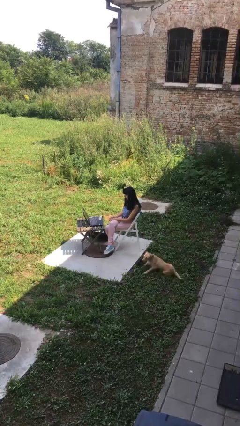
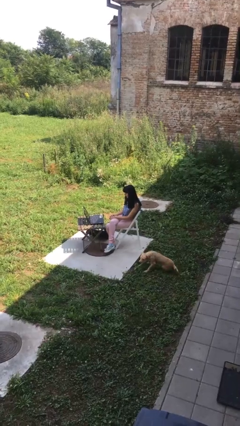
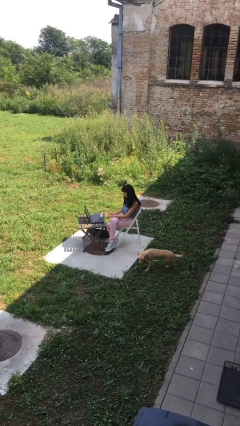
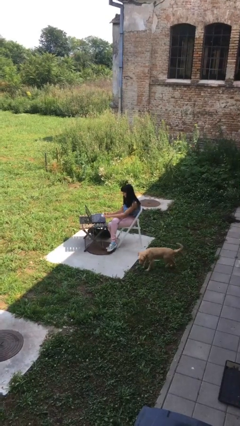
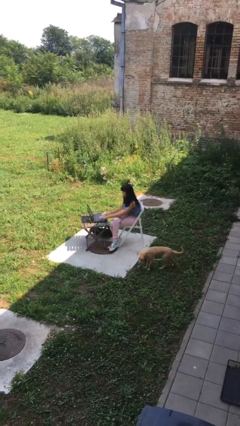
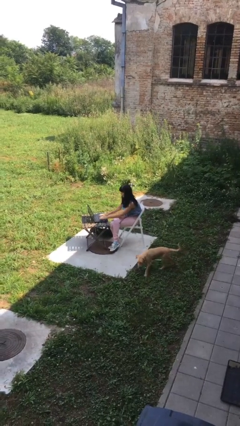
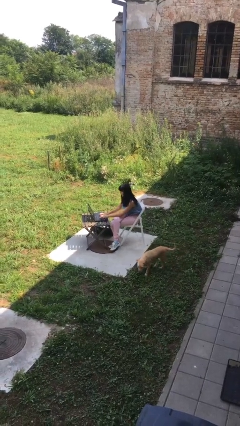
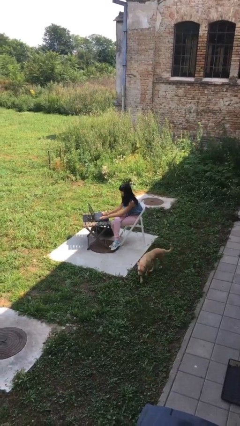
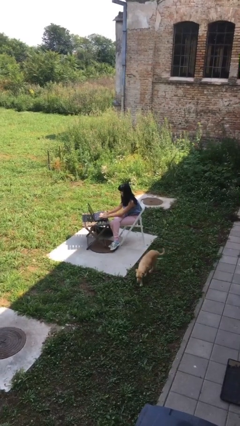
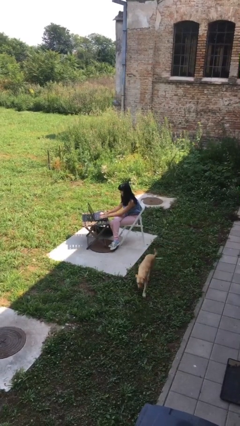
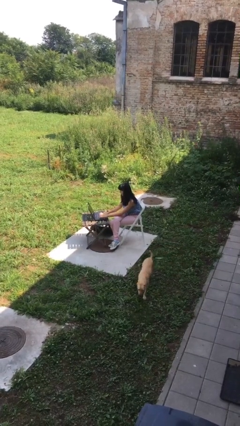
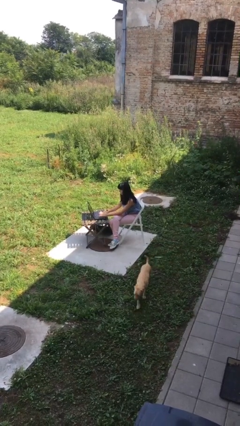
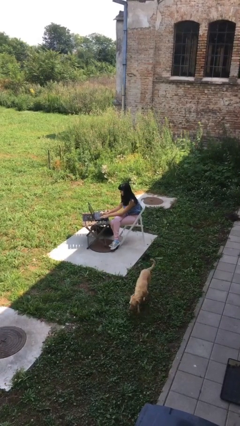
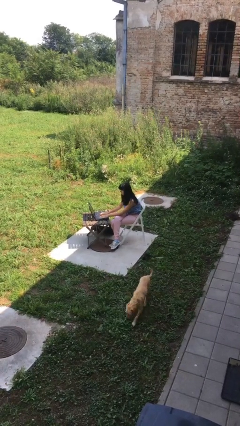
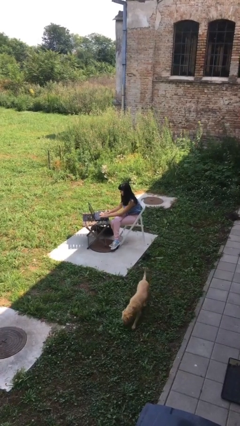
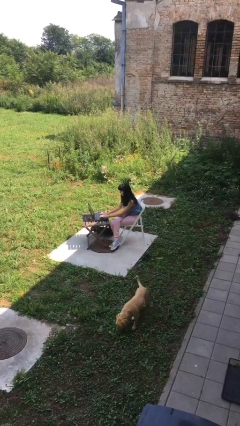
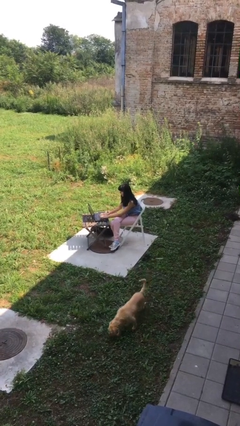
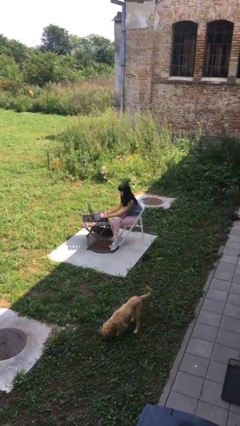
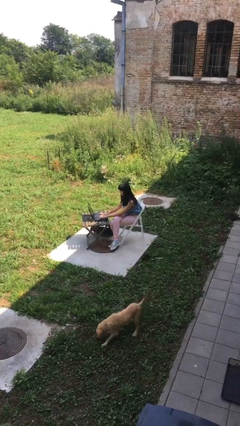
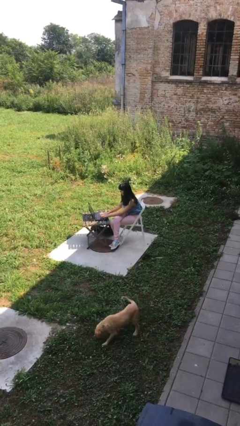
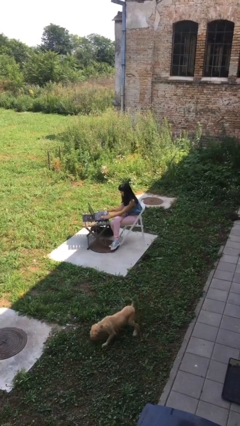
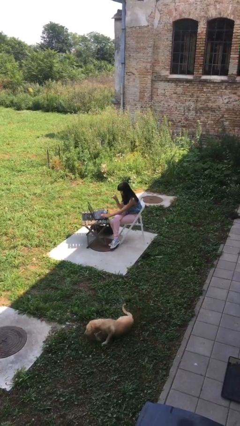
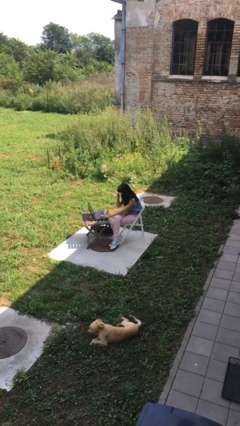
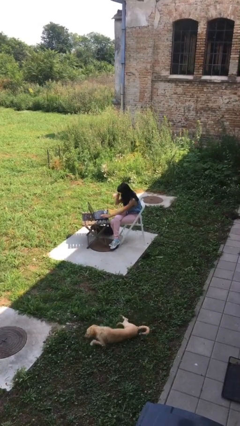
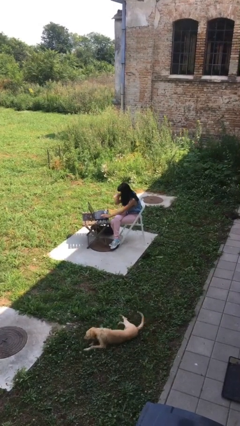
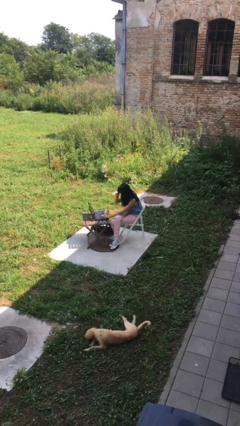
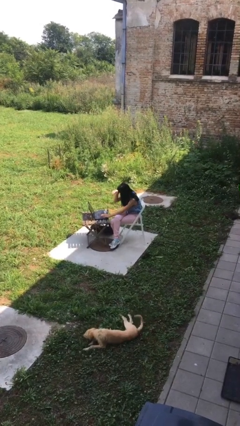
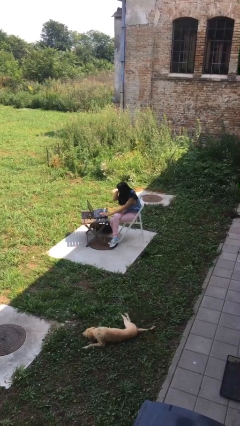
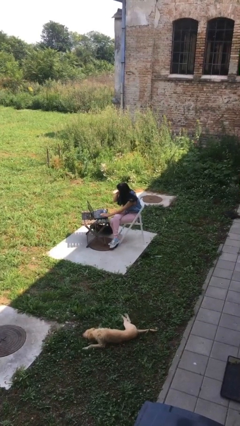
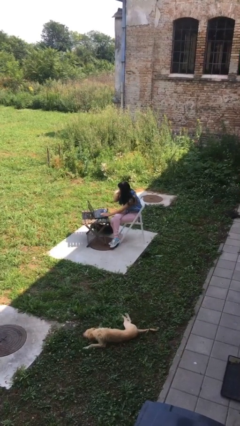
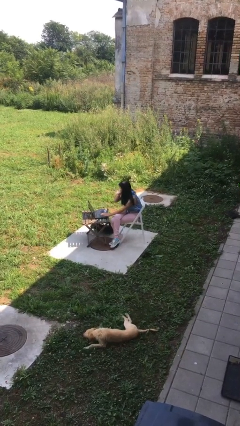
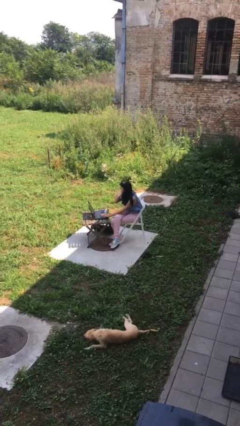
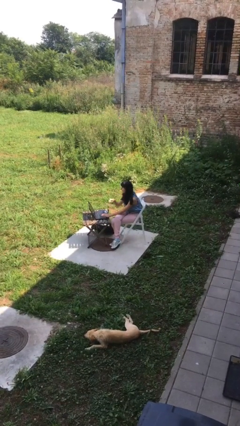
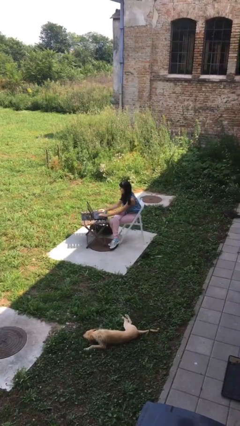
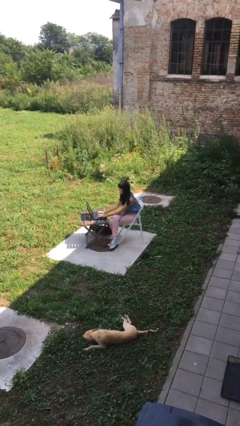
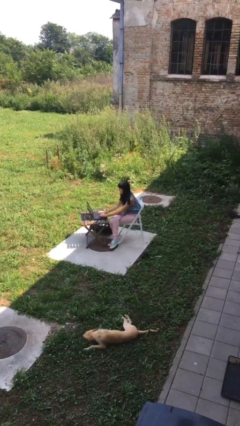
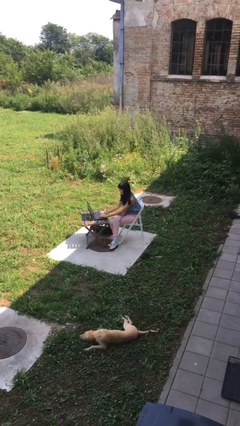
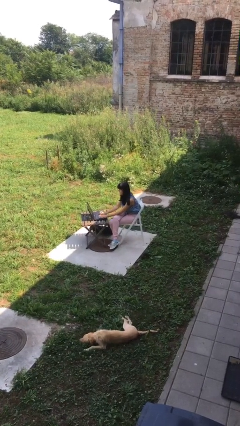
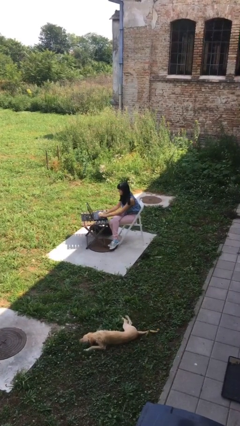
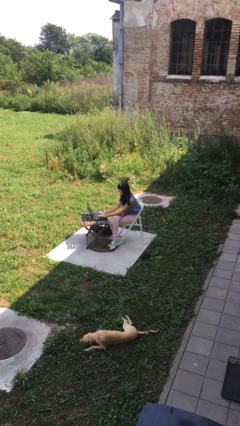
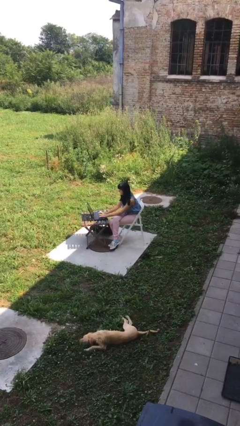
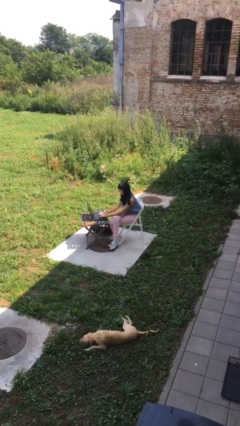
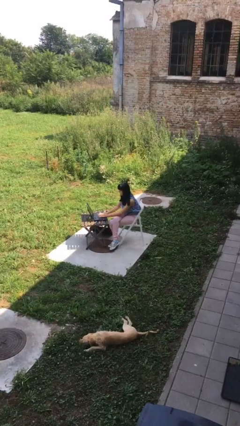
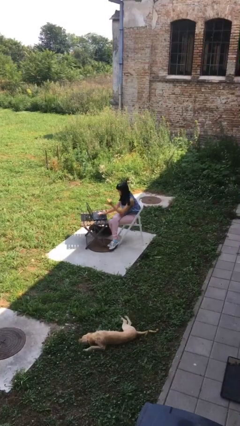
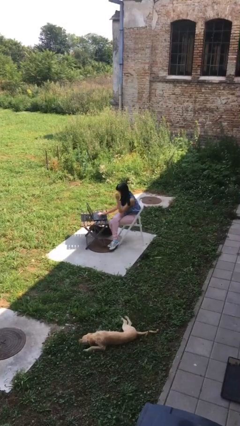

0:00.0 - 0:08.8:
person interacts with laptop

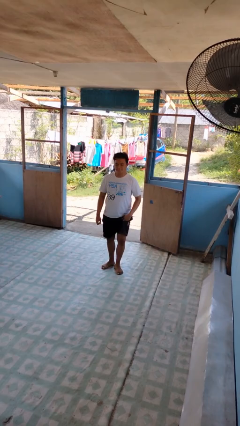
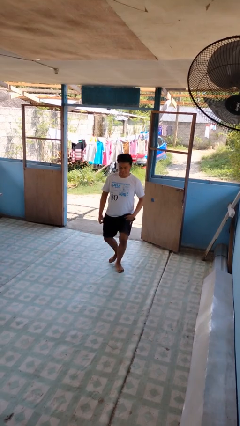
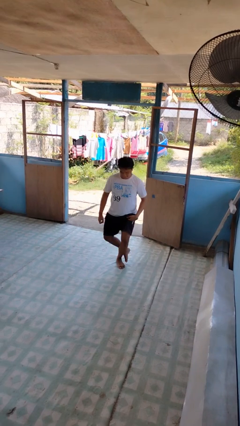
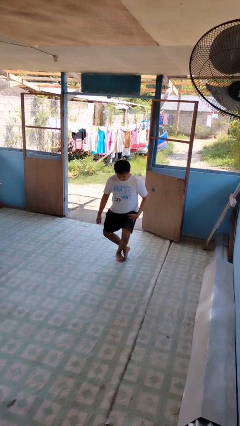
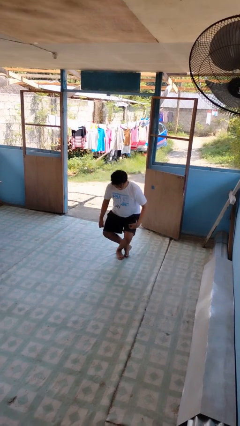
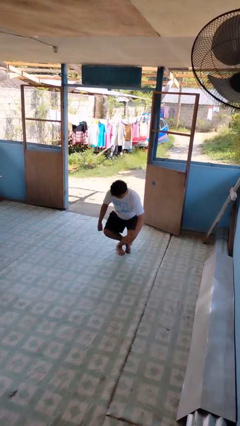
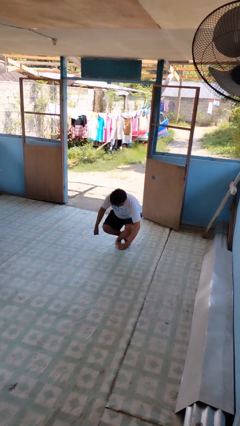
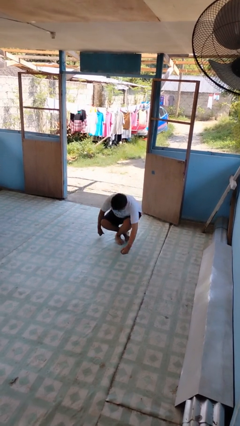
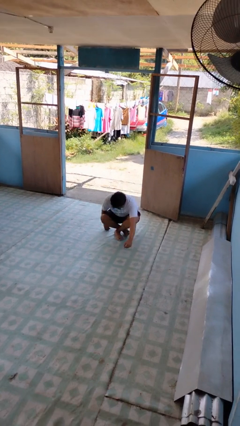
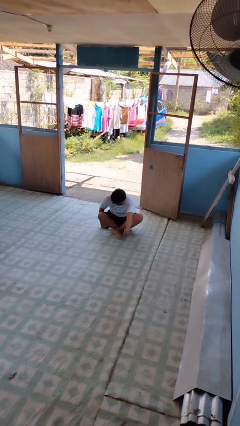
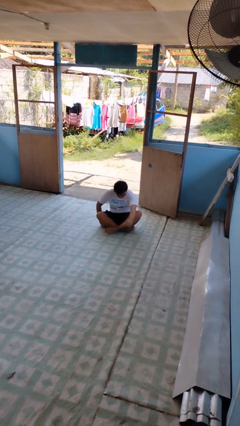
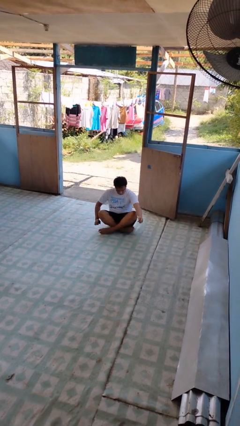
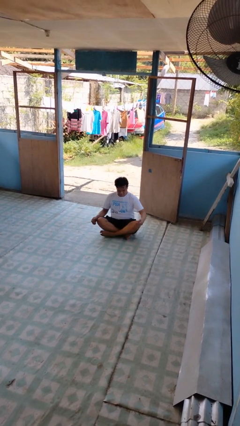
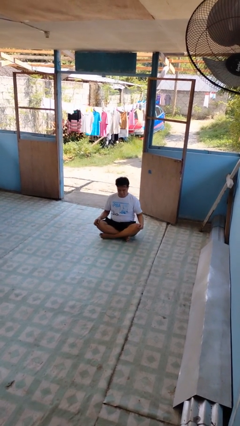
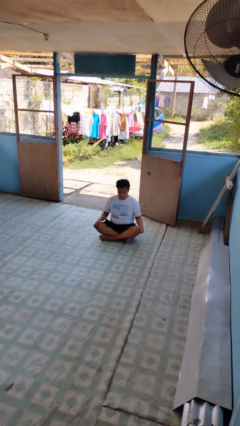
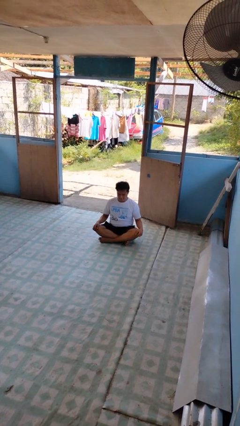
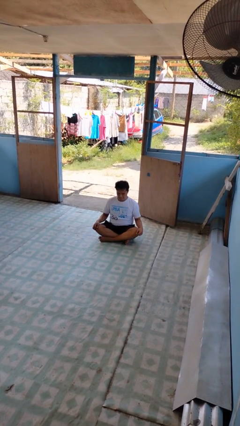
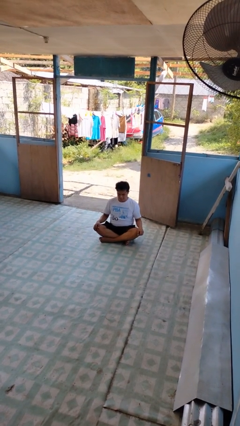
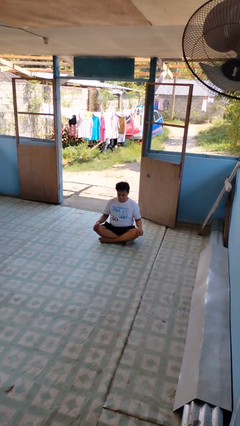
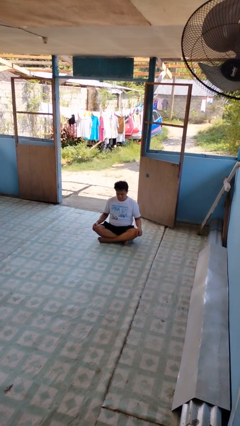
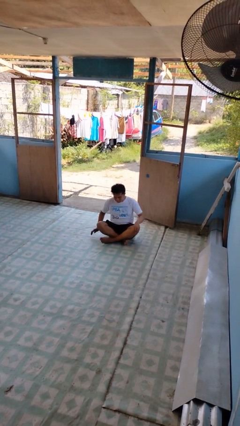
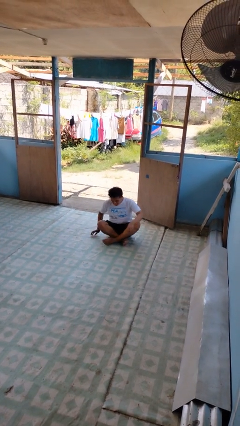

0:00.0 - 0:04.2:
person sits crisscross

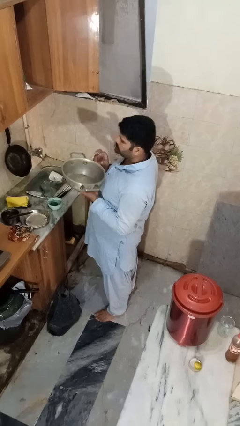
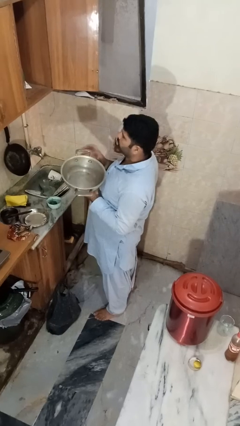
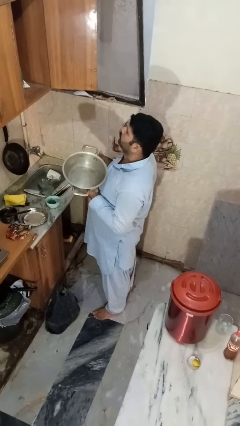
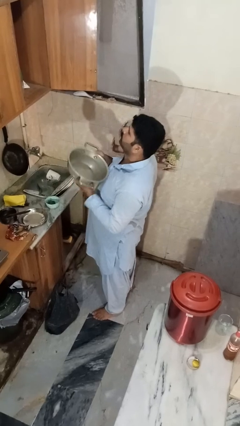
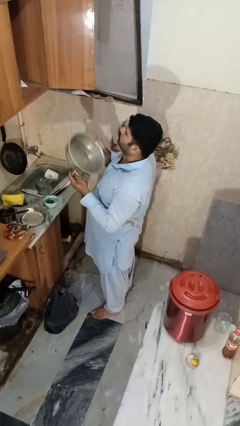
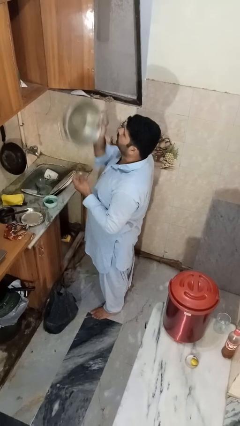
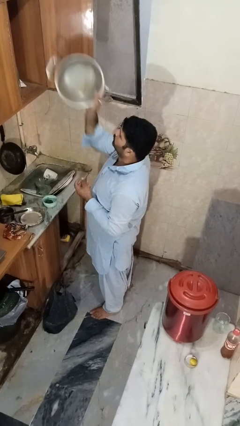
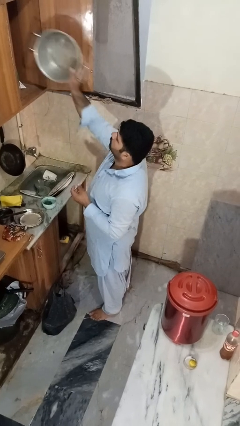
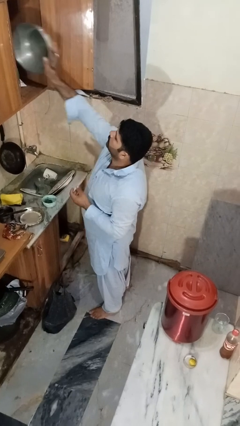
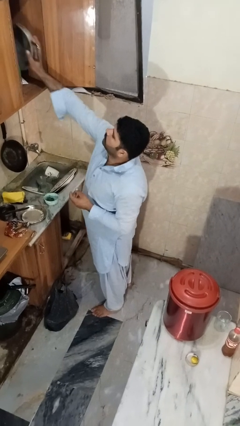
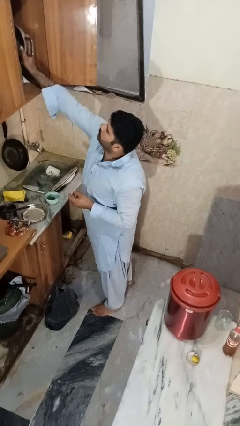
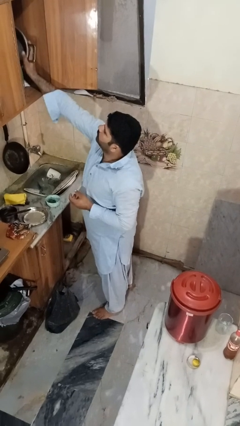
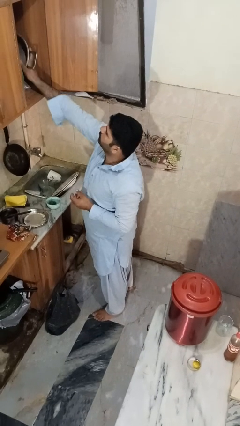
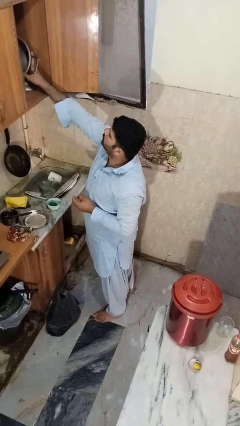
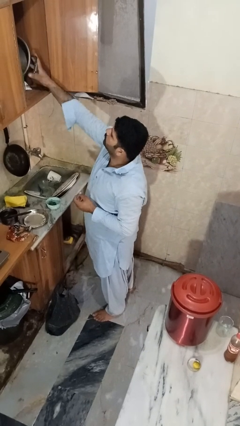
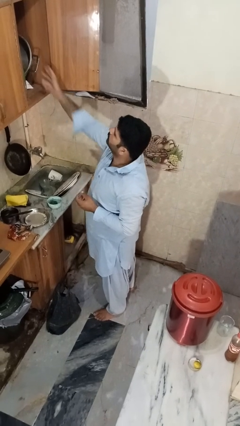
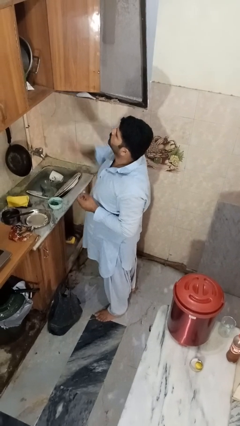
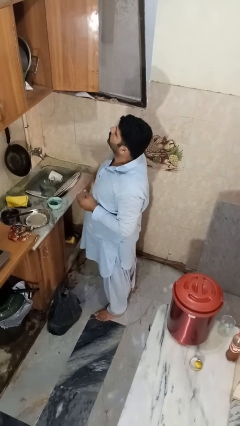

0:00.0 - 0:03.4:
person puts object in cabinet

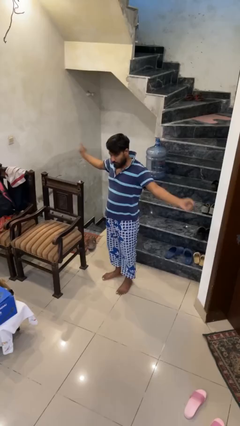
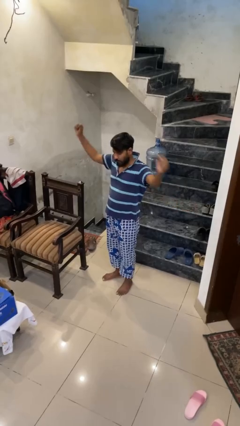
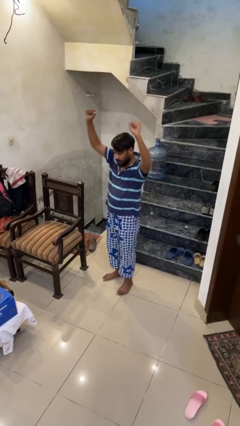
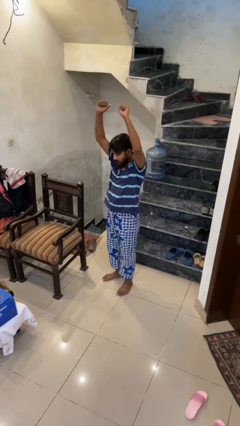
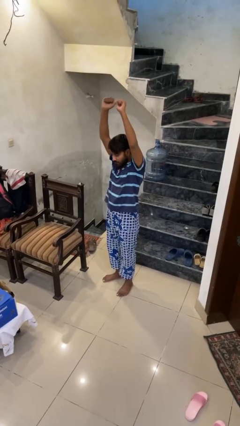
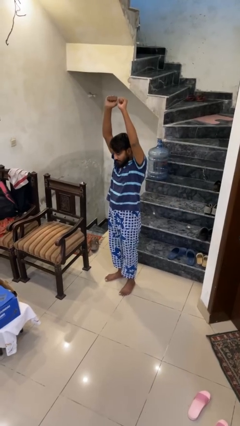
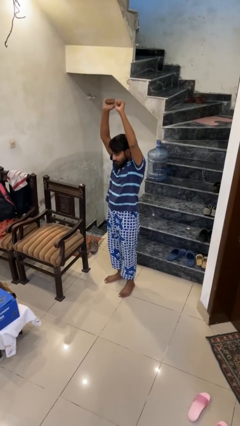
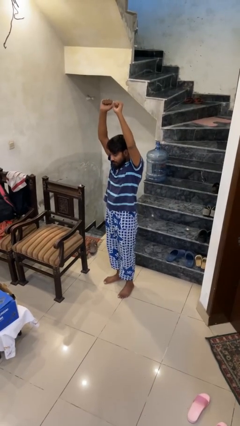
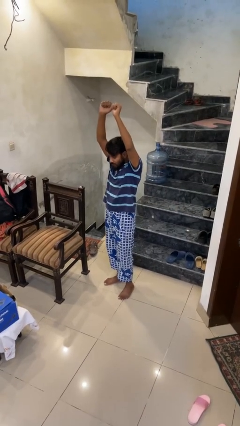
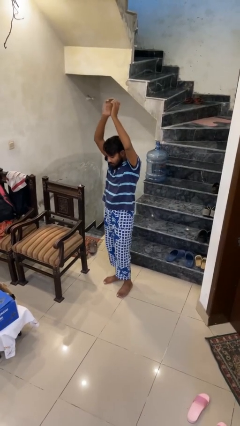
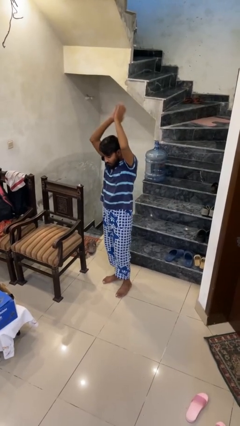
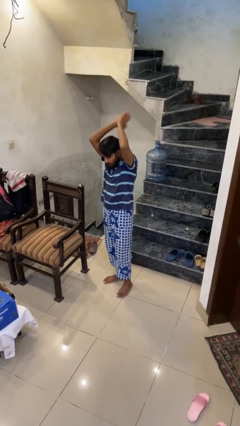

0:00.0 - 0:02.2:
person stretches arms over head
